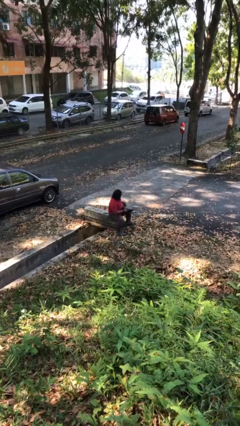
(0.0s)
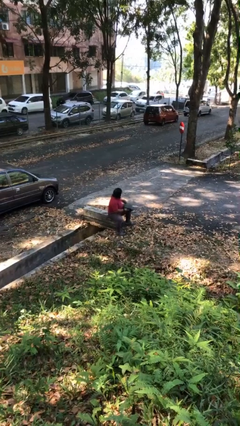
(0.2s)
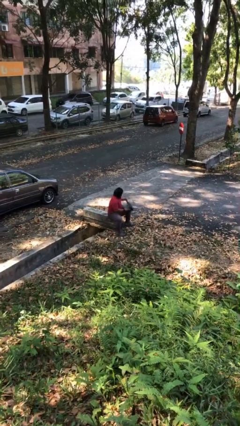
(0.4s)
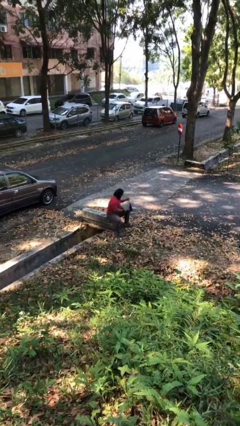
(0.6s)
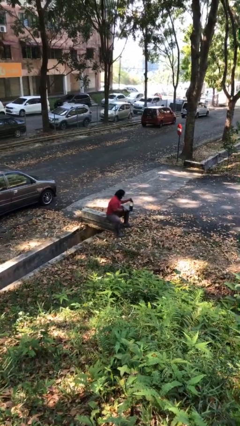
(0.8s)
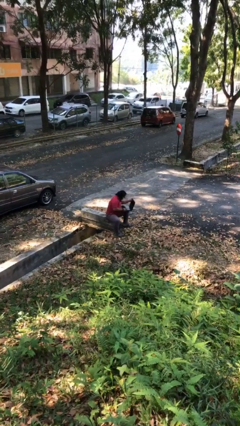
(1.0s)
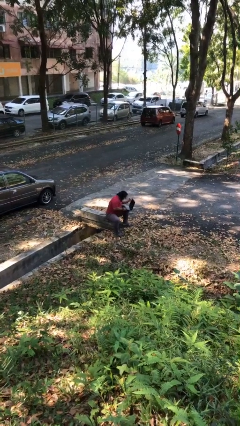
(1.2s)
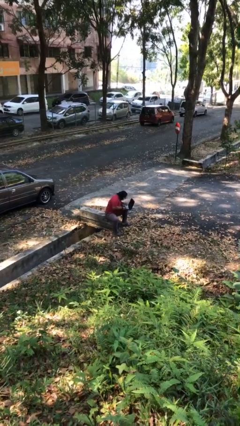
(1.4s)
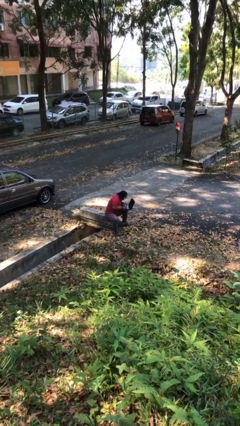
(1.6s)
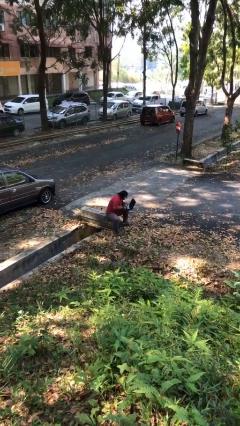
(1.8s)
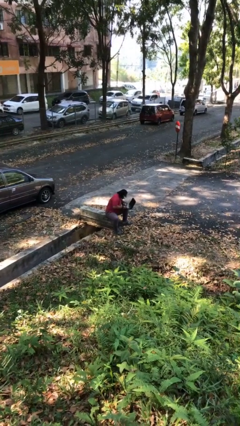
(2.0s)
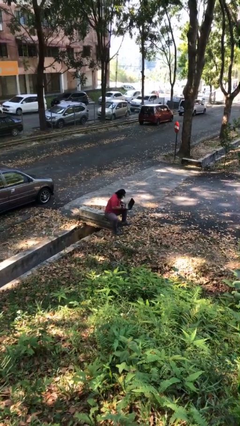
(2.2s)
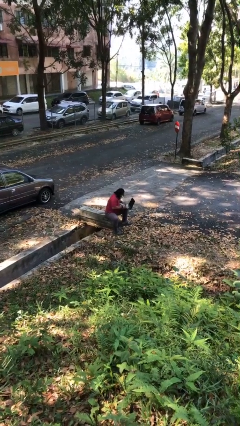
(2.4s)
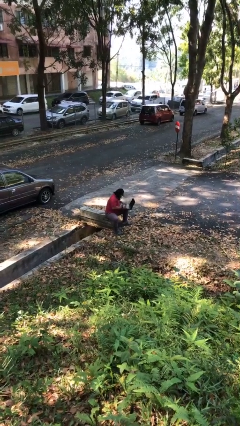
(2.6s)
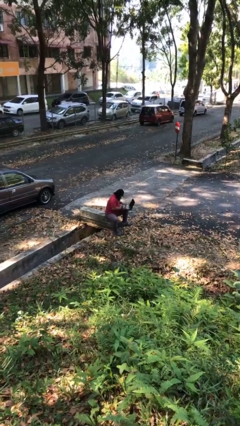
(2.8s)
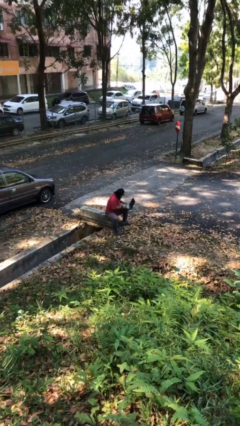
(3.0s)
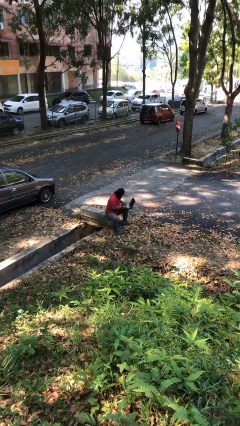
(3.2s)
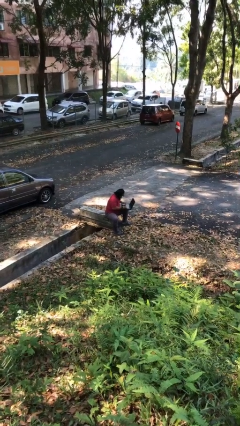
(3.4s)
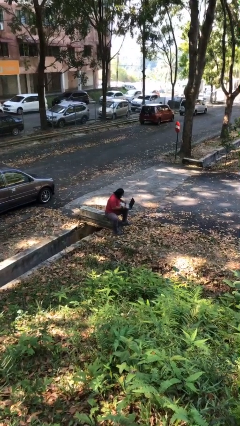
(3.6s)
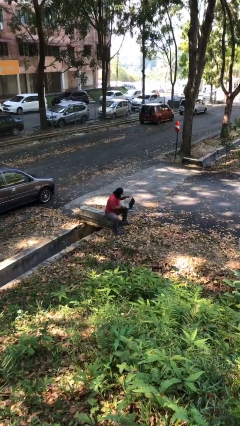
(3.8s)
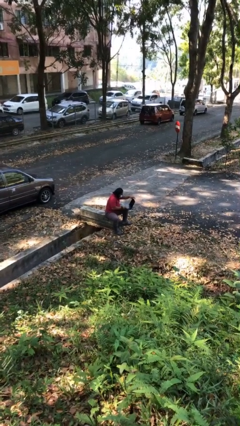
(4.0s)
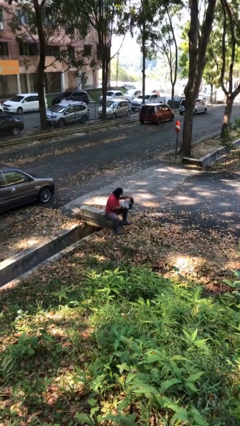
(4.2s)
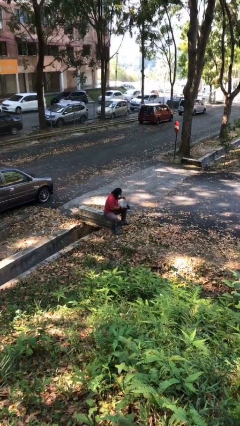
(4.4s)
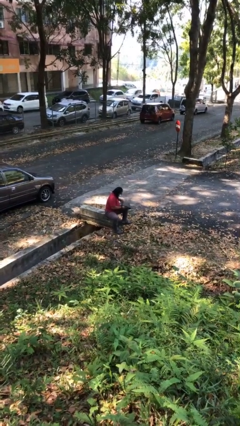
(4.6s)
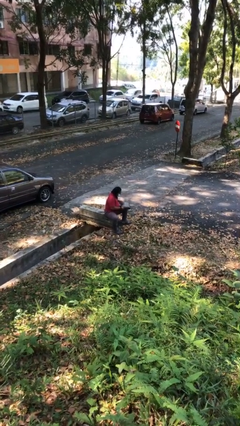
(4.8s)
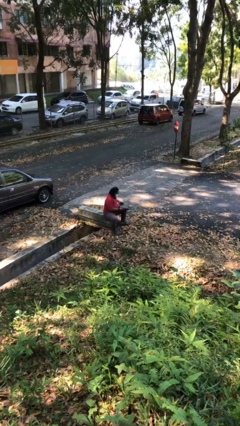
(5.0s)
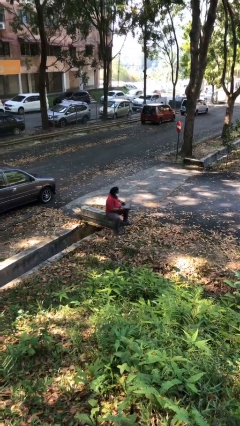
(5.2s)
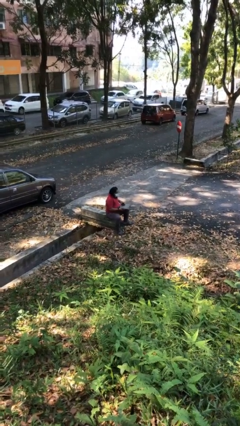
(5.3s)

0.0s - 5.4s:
person interacts with laptop

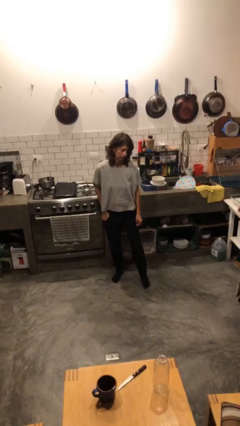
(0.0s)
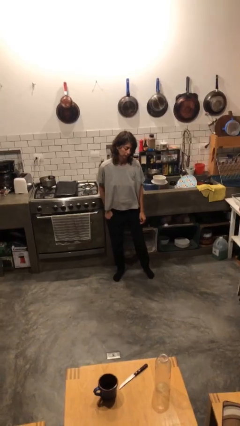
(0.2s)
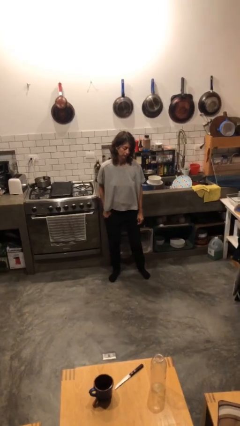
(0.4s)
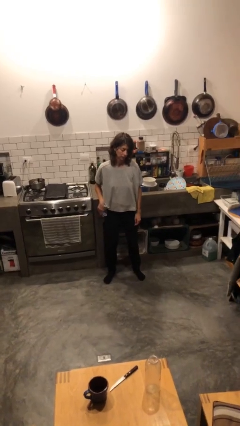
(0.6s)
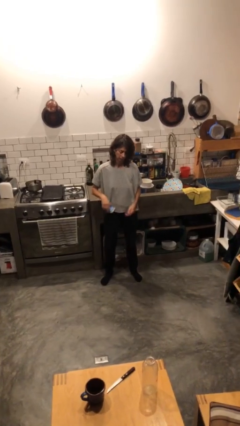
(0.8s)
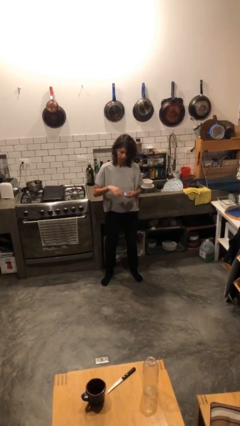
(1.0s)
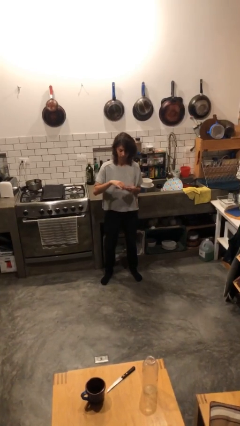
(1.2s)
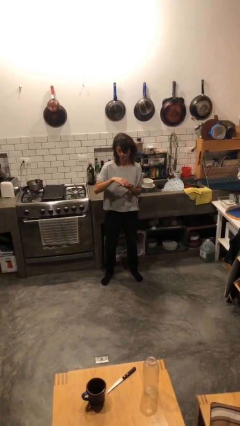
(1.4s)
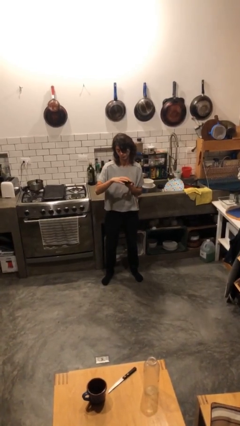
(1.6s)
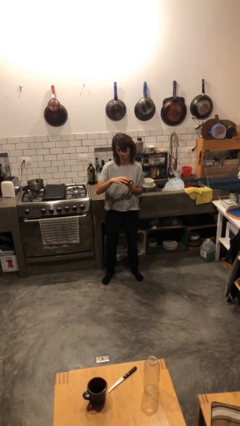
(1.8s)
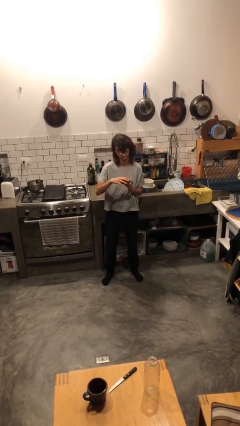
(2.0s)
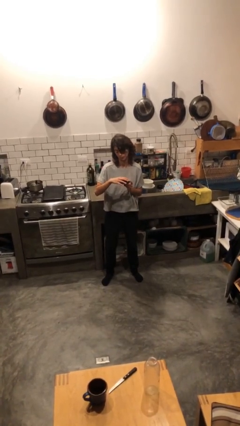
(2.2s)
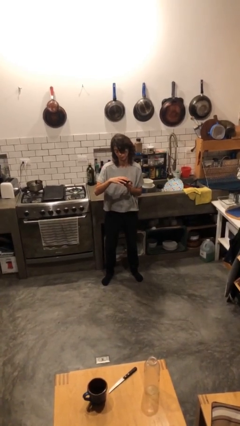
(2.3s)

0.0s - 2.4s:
person takes phone from pocket

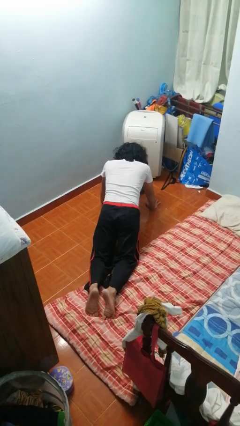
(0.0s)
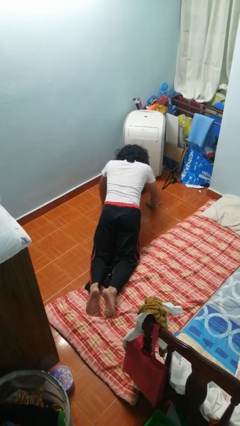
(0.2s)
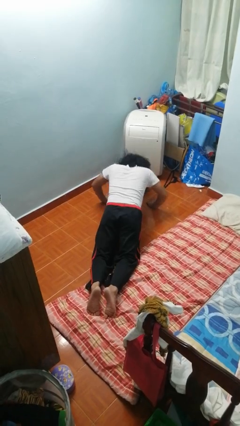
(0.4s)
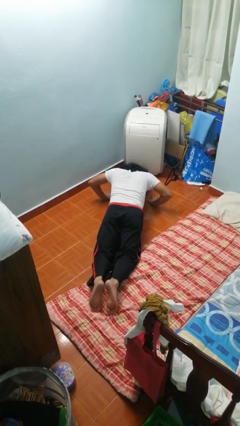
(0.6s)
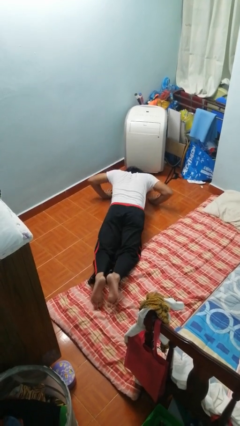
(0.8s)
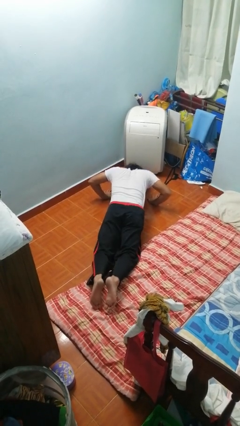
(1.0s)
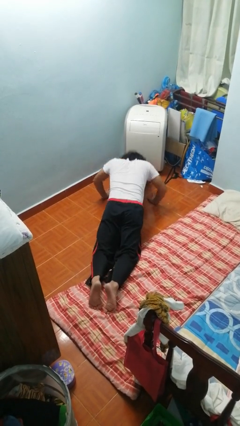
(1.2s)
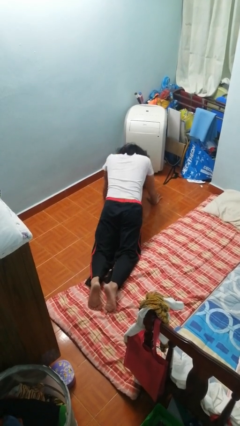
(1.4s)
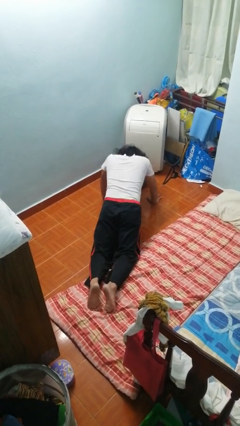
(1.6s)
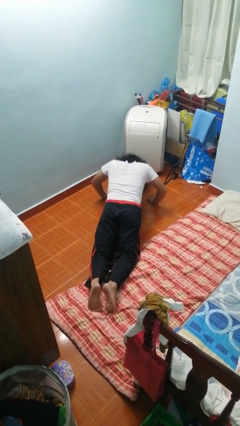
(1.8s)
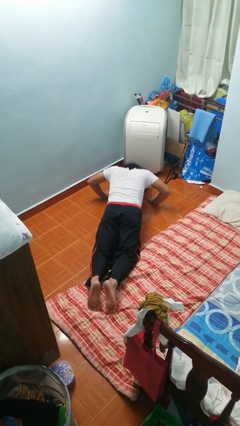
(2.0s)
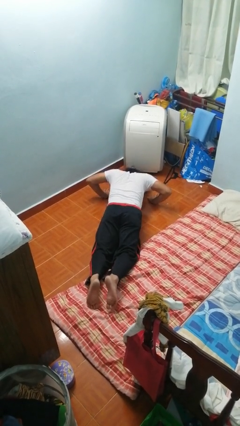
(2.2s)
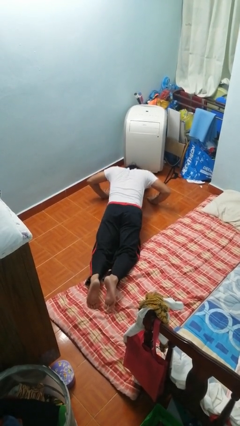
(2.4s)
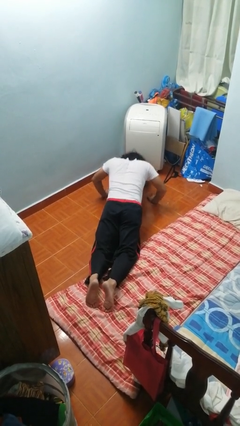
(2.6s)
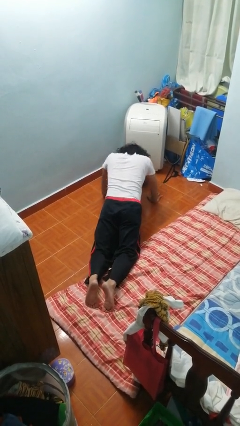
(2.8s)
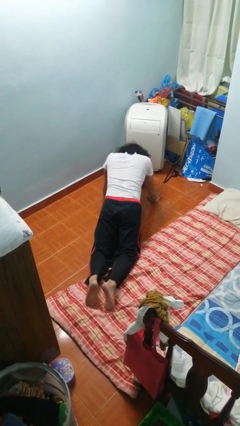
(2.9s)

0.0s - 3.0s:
person exercises with pushup

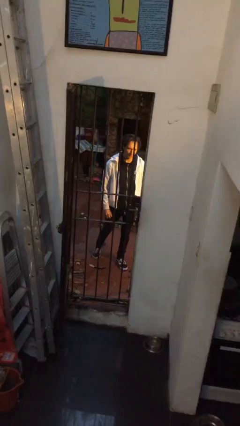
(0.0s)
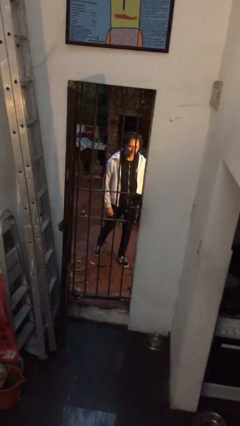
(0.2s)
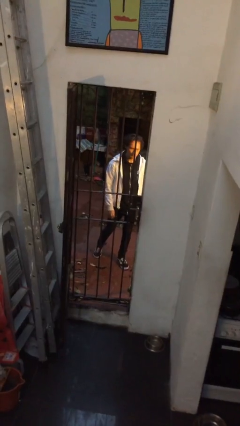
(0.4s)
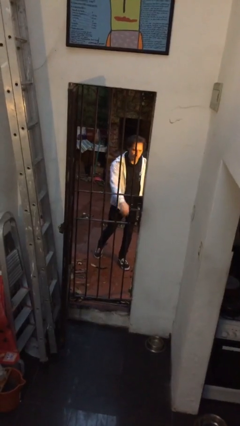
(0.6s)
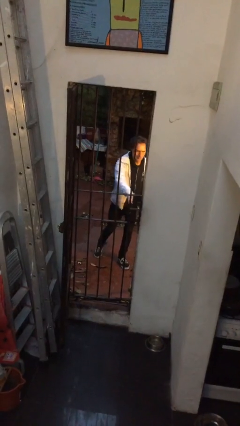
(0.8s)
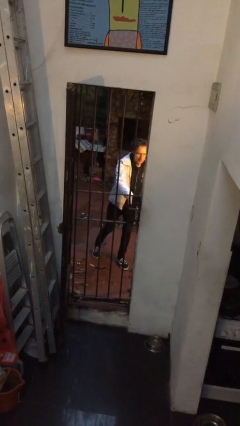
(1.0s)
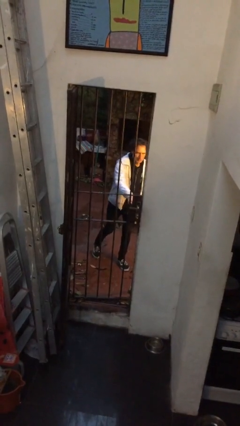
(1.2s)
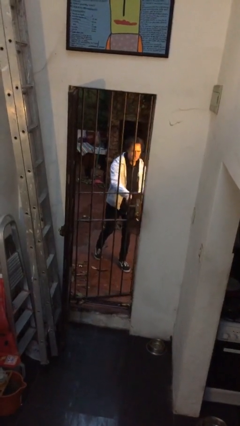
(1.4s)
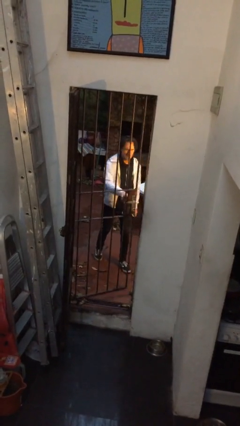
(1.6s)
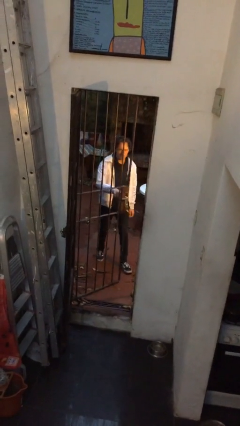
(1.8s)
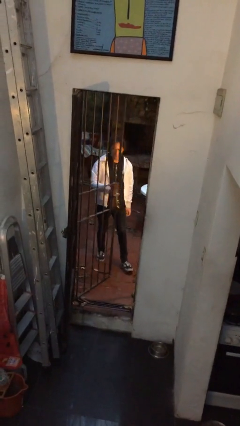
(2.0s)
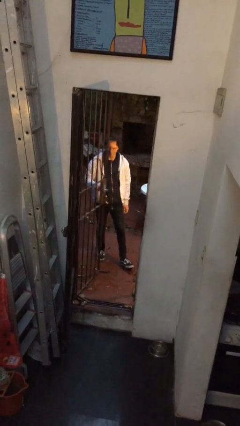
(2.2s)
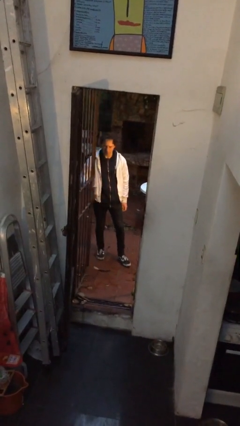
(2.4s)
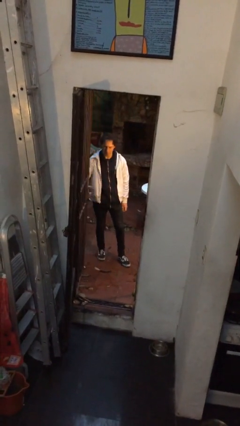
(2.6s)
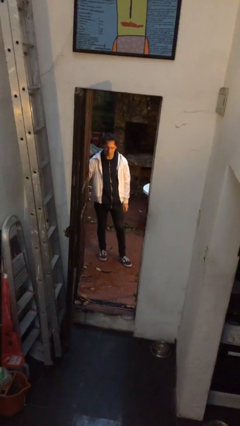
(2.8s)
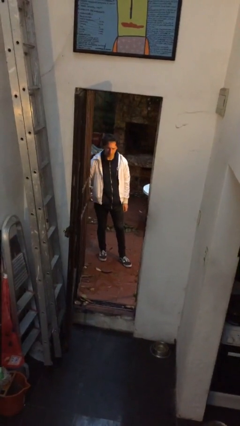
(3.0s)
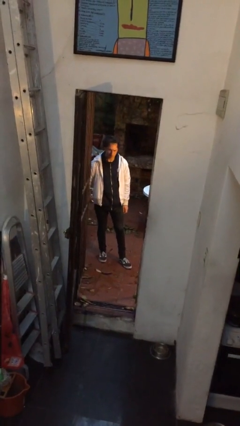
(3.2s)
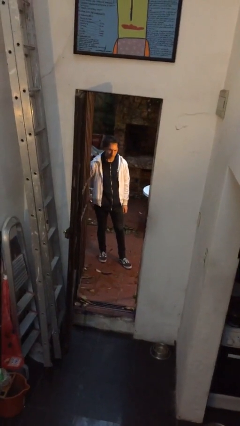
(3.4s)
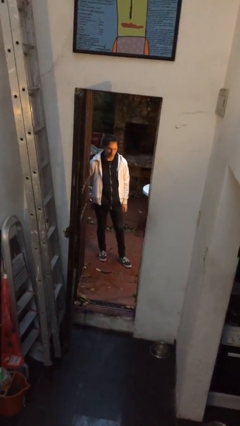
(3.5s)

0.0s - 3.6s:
person opens gate

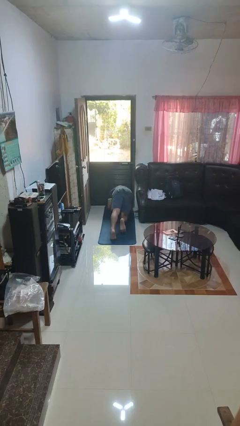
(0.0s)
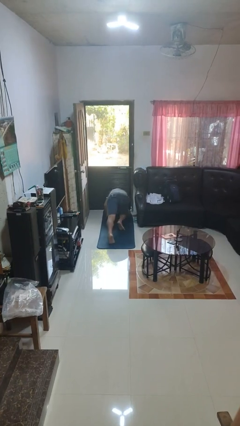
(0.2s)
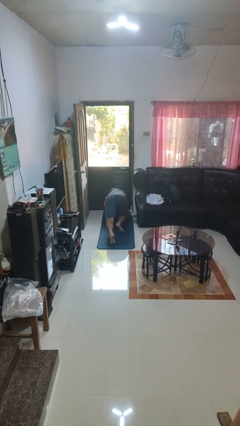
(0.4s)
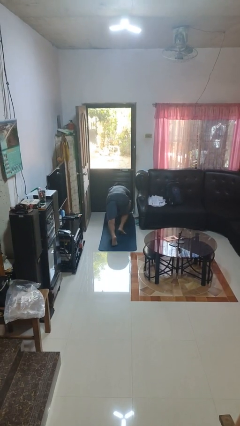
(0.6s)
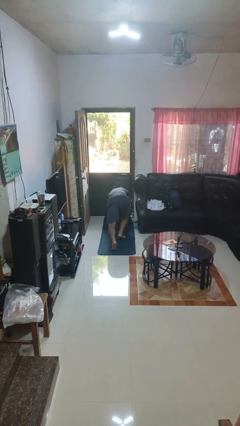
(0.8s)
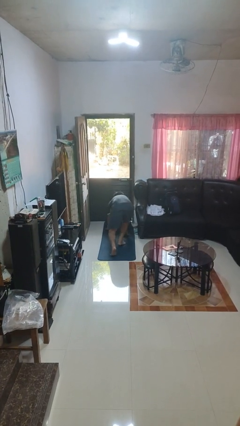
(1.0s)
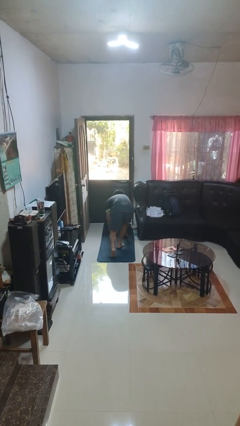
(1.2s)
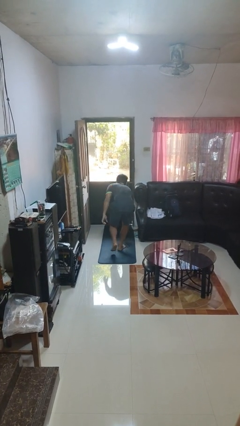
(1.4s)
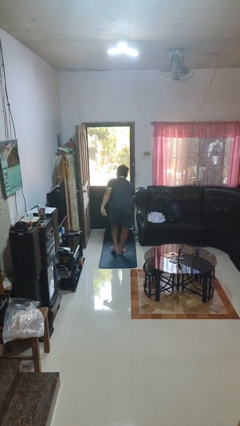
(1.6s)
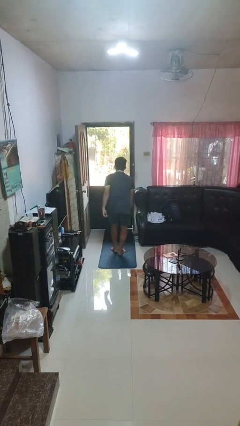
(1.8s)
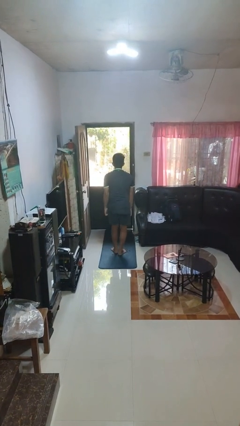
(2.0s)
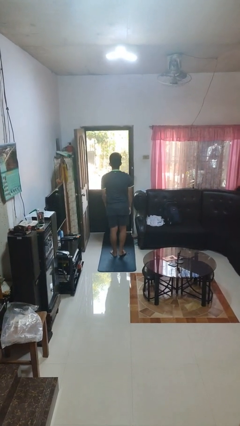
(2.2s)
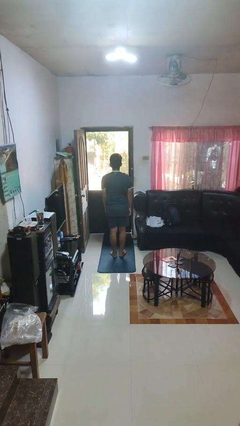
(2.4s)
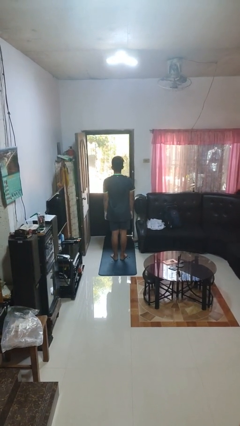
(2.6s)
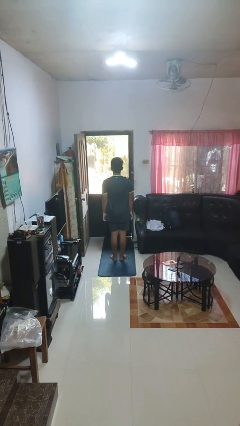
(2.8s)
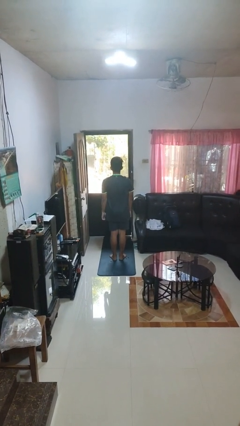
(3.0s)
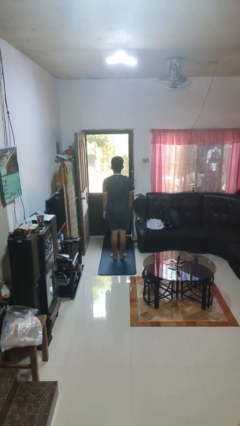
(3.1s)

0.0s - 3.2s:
person stands up from floor
